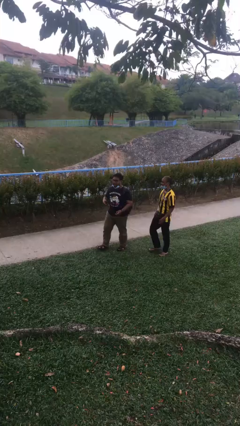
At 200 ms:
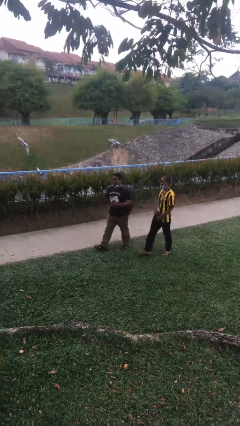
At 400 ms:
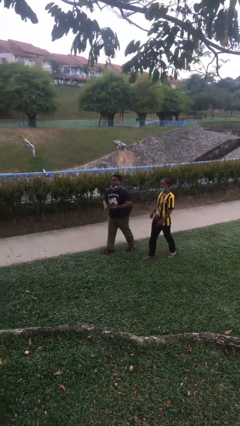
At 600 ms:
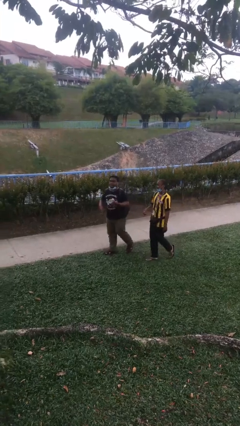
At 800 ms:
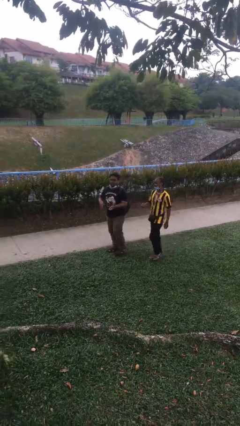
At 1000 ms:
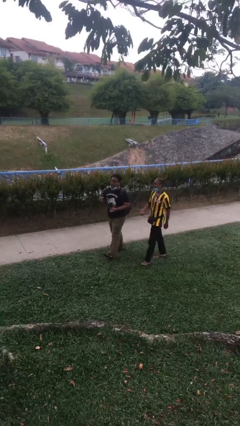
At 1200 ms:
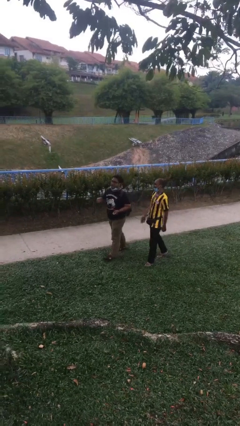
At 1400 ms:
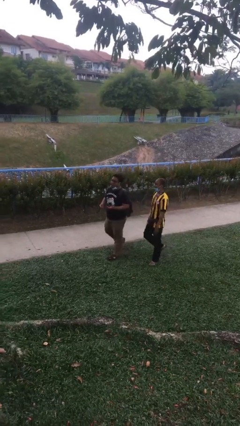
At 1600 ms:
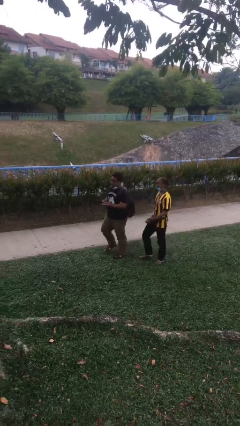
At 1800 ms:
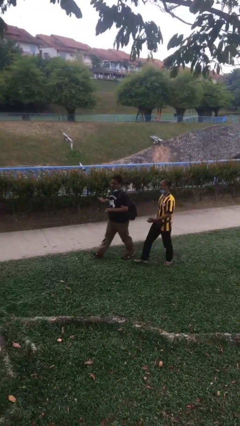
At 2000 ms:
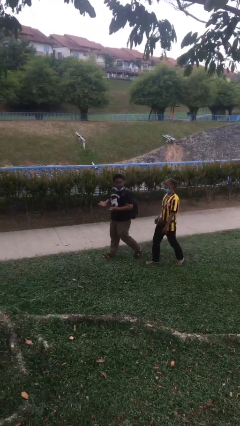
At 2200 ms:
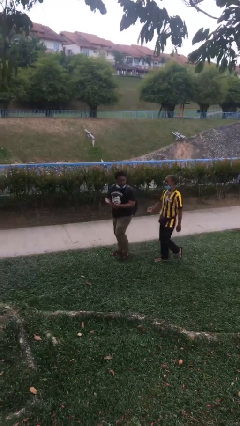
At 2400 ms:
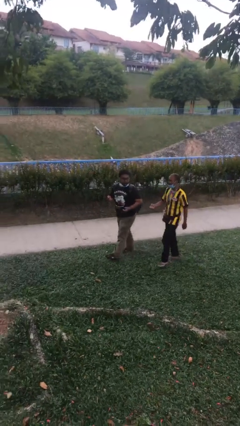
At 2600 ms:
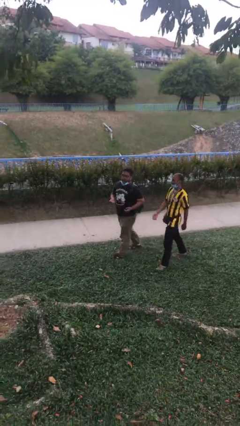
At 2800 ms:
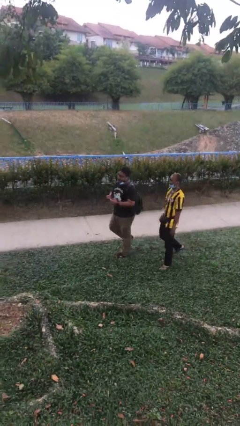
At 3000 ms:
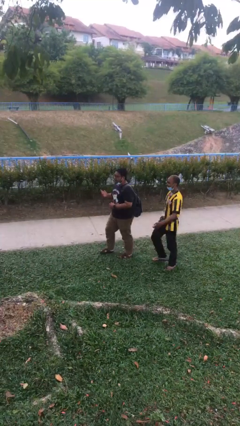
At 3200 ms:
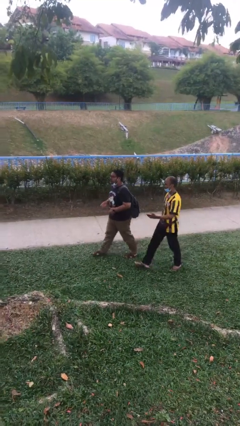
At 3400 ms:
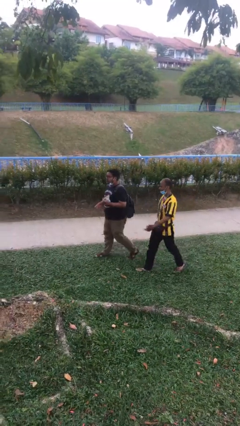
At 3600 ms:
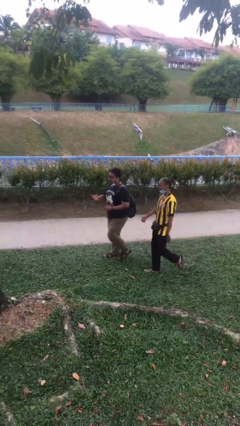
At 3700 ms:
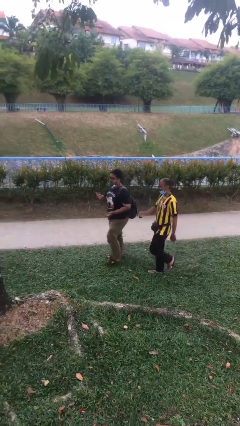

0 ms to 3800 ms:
person talks to person

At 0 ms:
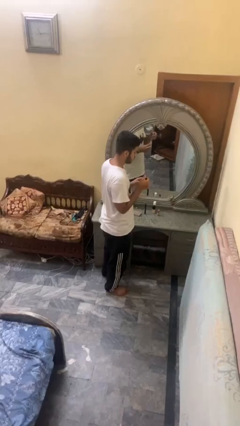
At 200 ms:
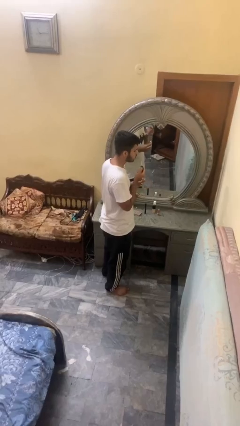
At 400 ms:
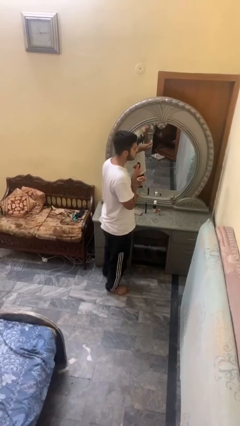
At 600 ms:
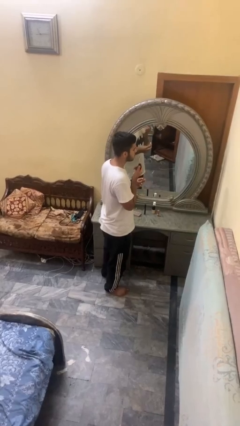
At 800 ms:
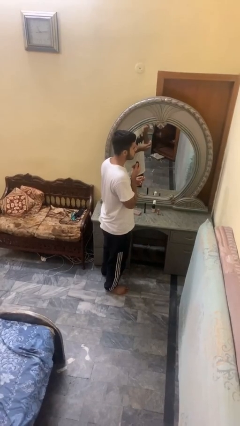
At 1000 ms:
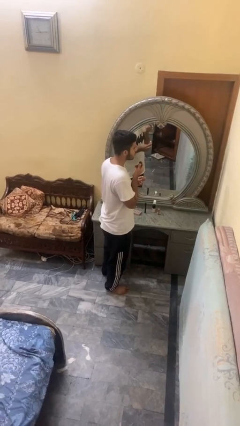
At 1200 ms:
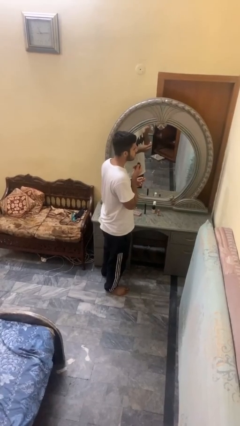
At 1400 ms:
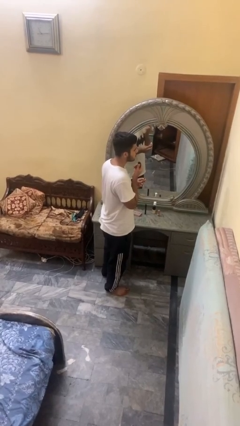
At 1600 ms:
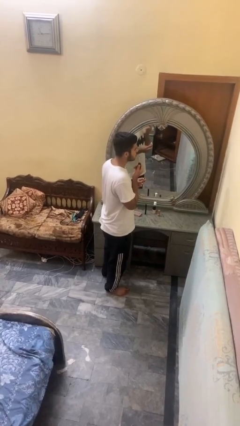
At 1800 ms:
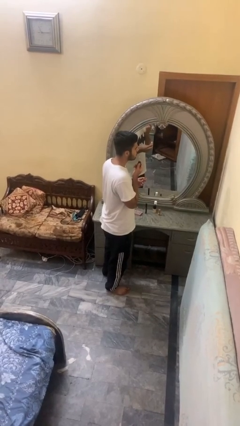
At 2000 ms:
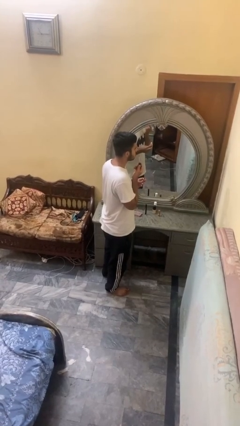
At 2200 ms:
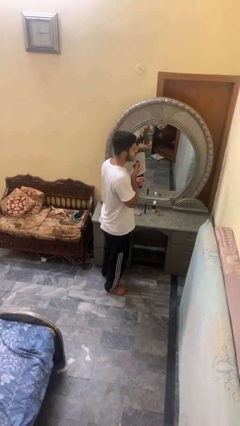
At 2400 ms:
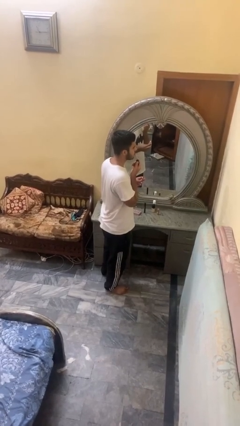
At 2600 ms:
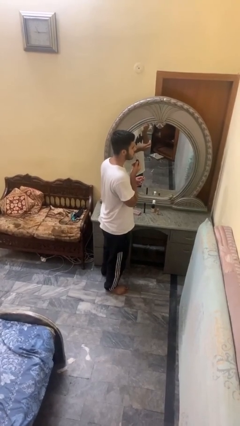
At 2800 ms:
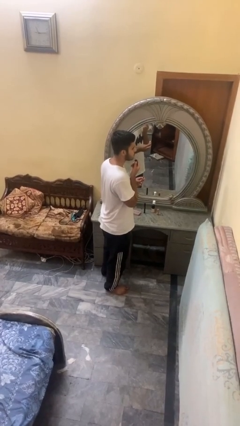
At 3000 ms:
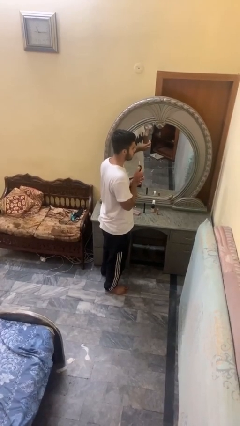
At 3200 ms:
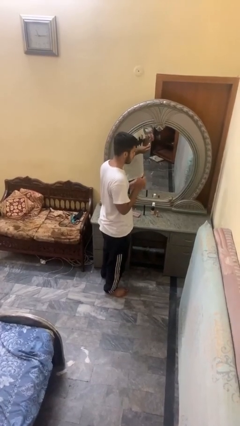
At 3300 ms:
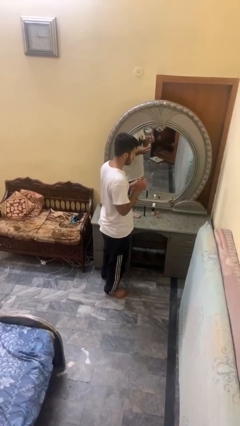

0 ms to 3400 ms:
person applies lip makeup

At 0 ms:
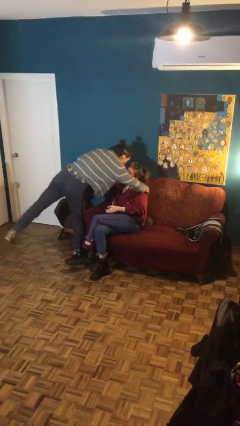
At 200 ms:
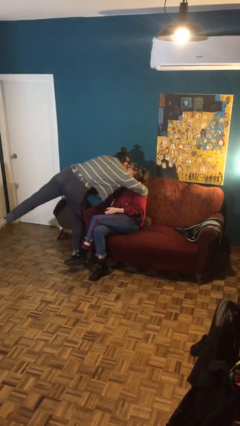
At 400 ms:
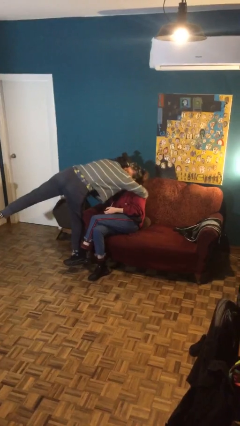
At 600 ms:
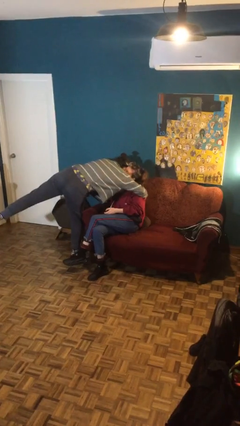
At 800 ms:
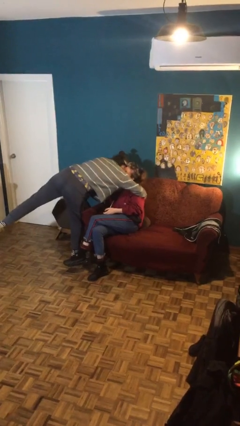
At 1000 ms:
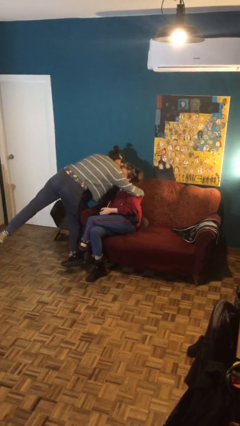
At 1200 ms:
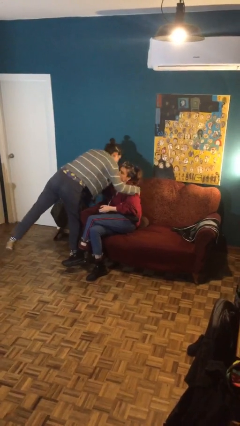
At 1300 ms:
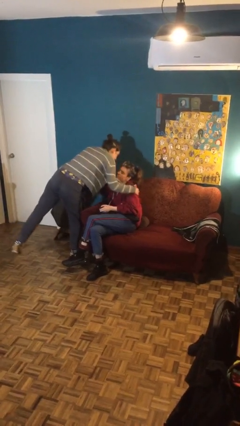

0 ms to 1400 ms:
person embraces person

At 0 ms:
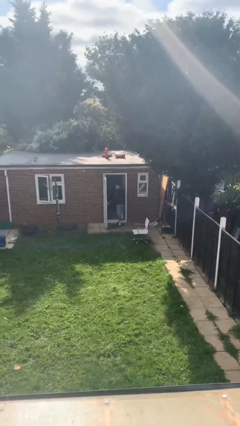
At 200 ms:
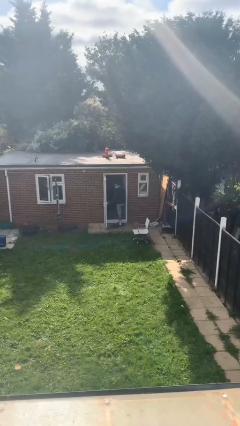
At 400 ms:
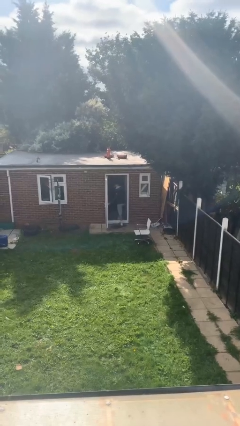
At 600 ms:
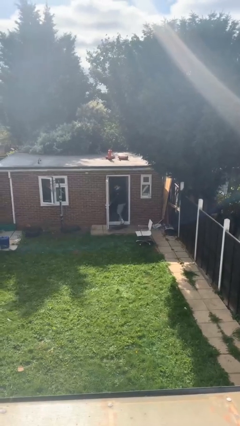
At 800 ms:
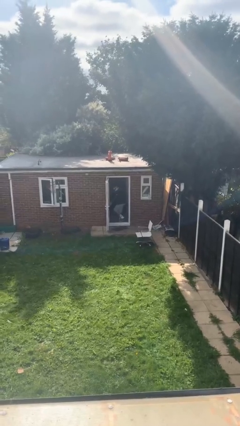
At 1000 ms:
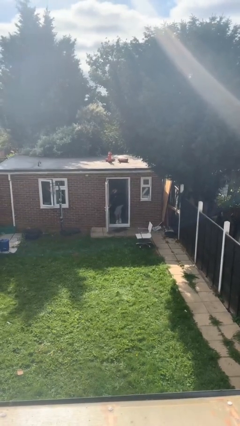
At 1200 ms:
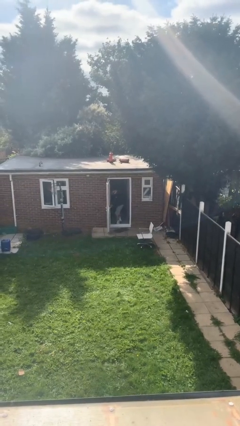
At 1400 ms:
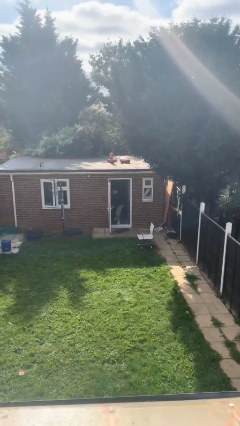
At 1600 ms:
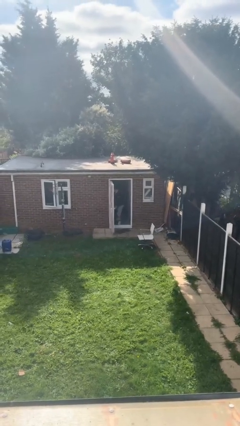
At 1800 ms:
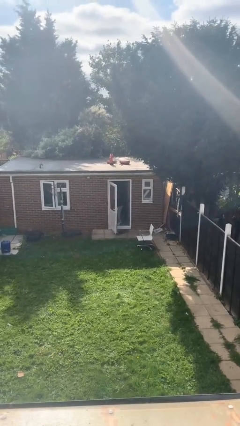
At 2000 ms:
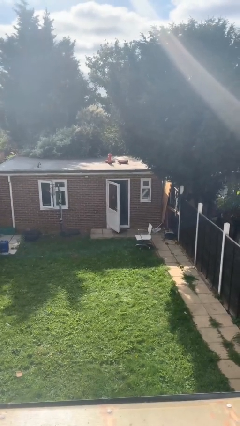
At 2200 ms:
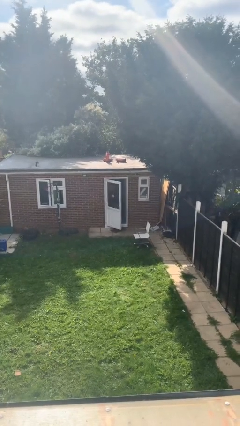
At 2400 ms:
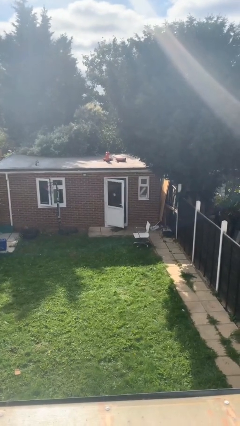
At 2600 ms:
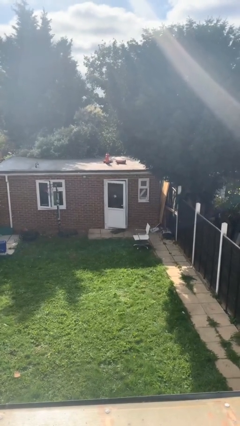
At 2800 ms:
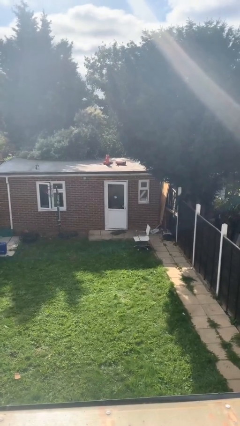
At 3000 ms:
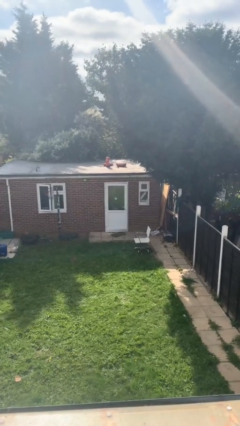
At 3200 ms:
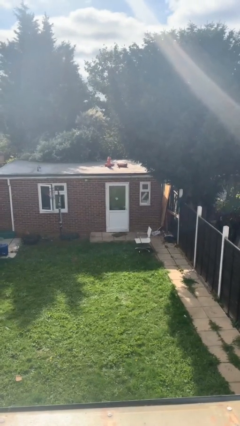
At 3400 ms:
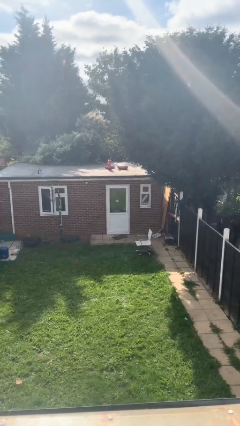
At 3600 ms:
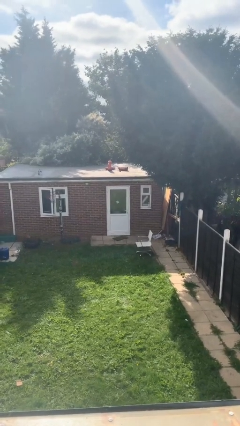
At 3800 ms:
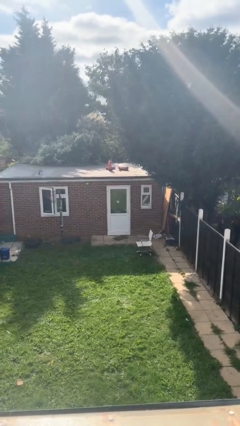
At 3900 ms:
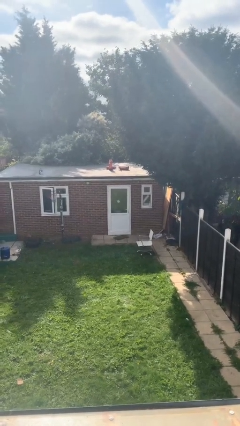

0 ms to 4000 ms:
person closes facility door

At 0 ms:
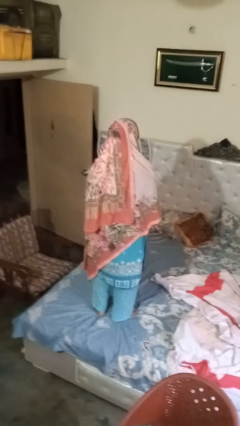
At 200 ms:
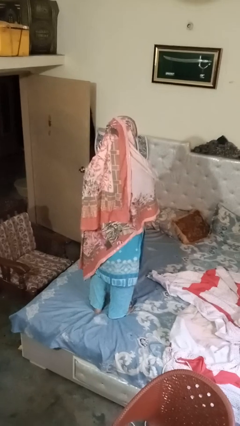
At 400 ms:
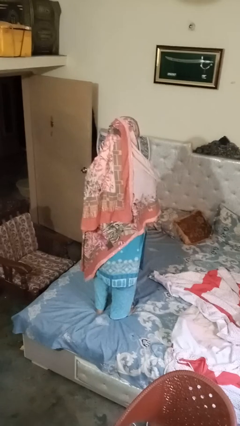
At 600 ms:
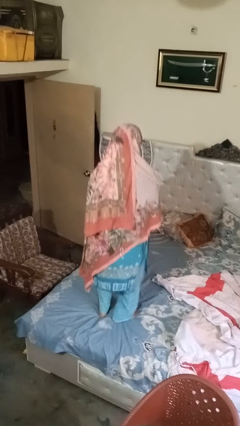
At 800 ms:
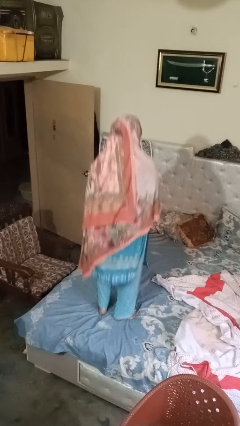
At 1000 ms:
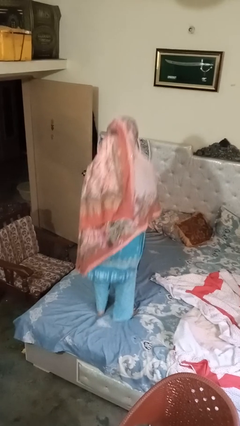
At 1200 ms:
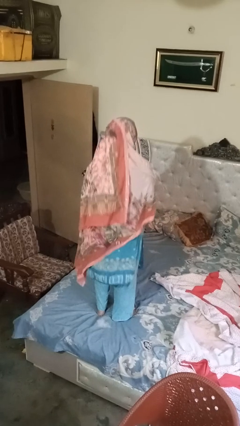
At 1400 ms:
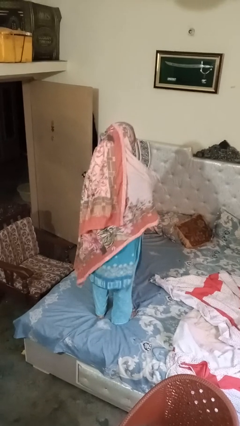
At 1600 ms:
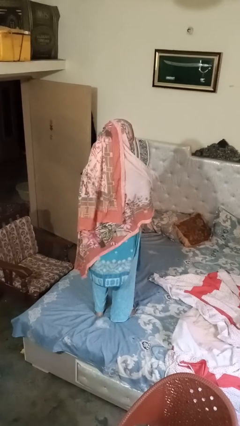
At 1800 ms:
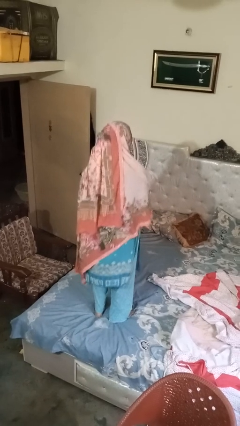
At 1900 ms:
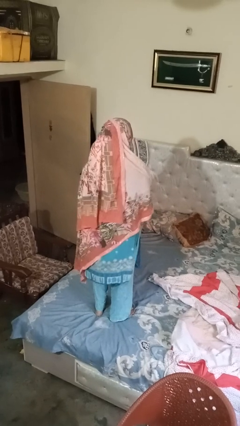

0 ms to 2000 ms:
person jumps on bed

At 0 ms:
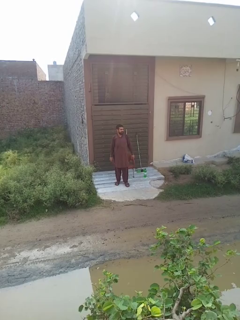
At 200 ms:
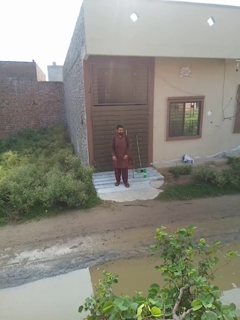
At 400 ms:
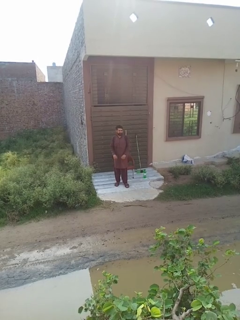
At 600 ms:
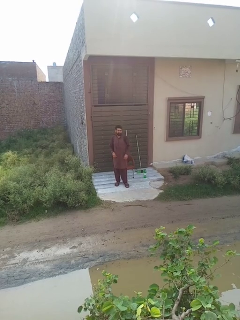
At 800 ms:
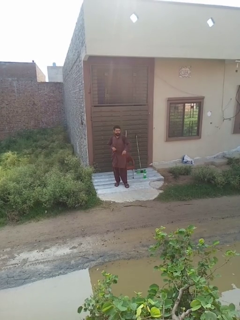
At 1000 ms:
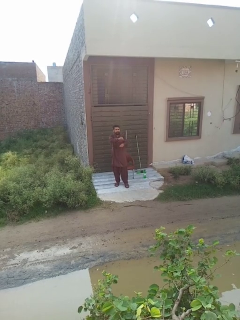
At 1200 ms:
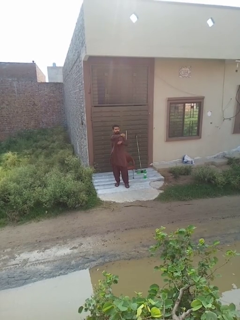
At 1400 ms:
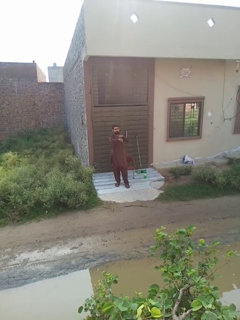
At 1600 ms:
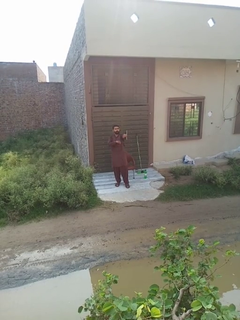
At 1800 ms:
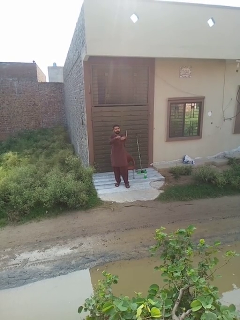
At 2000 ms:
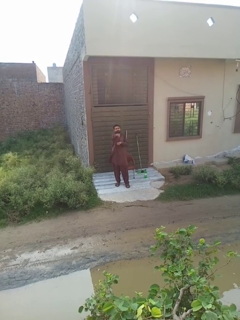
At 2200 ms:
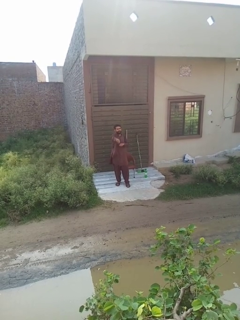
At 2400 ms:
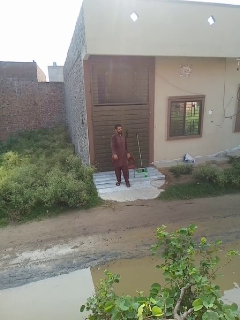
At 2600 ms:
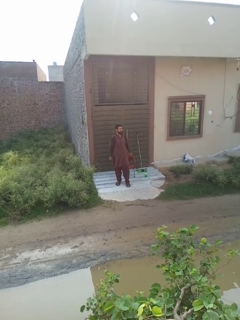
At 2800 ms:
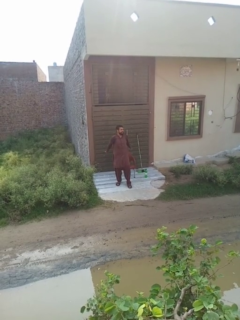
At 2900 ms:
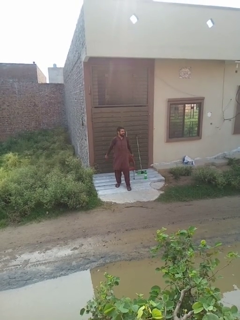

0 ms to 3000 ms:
person punches

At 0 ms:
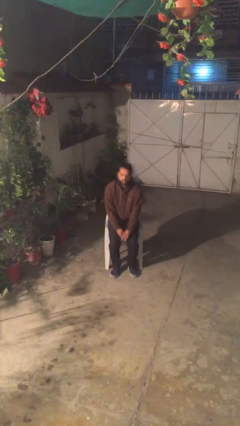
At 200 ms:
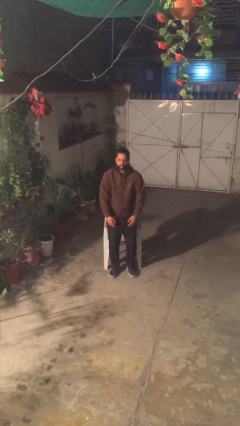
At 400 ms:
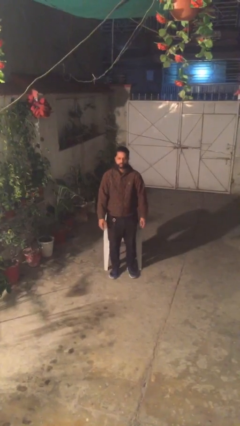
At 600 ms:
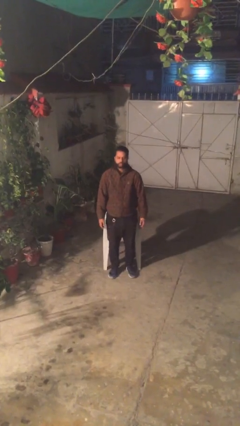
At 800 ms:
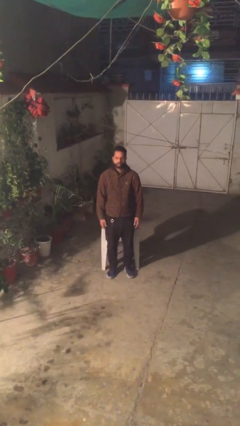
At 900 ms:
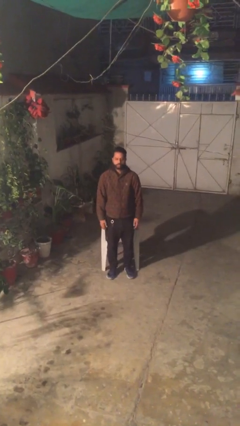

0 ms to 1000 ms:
person stands up
